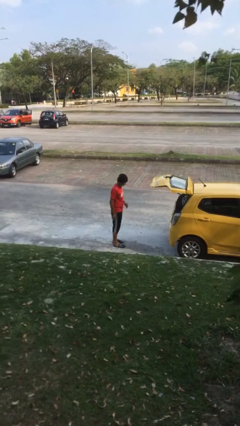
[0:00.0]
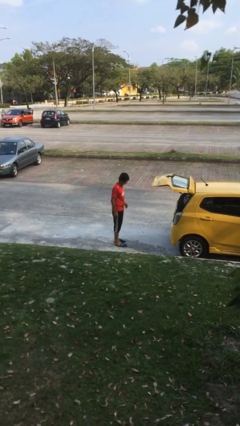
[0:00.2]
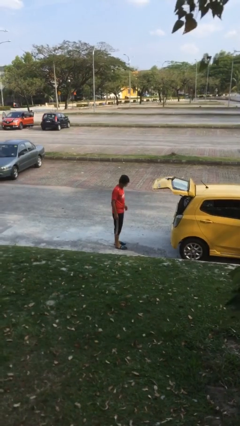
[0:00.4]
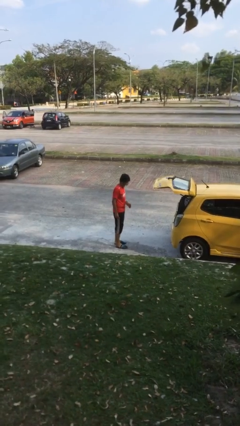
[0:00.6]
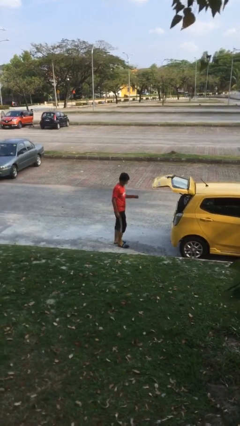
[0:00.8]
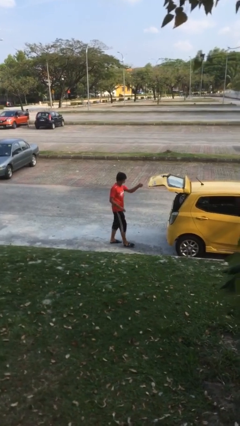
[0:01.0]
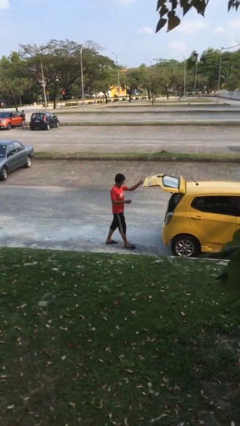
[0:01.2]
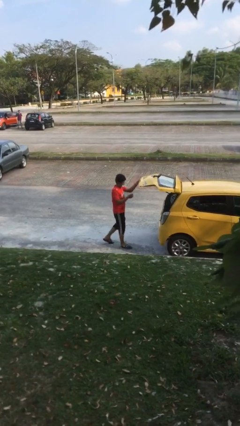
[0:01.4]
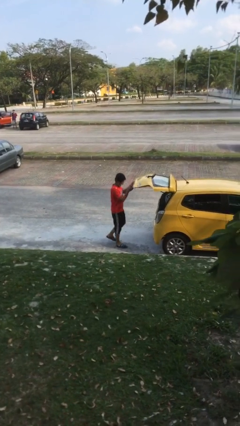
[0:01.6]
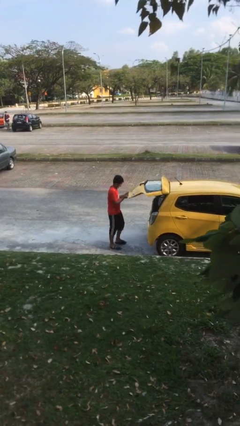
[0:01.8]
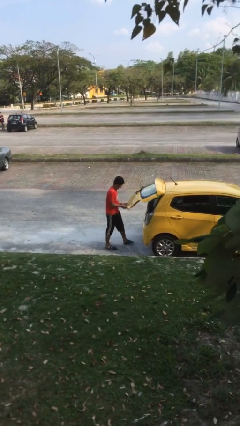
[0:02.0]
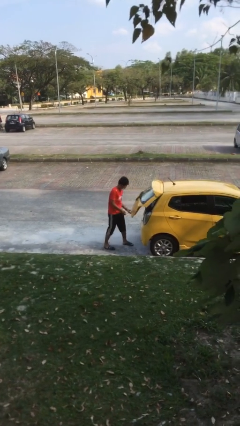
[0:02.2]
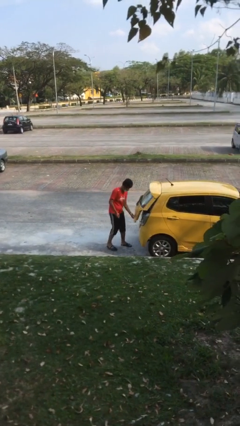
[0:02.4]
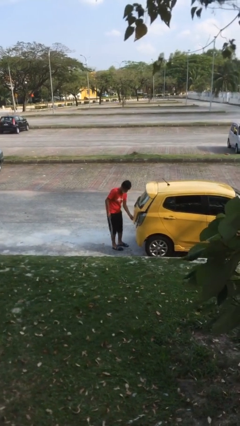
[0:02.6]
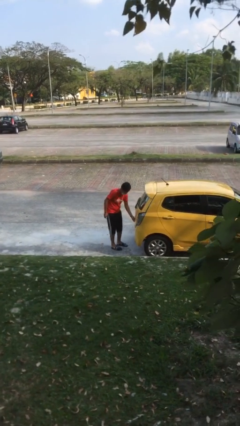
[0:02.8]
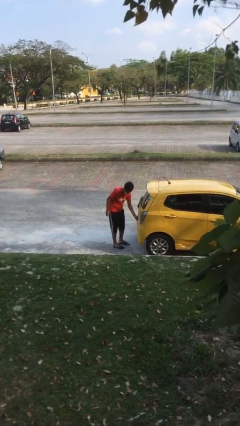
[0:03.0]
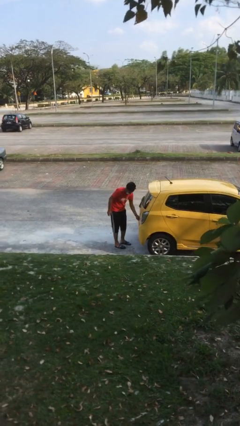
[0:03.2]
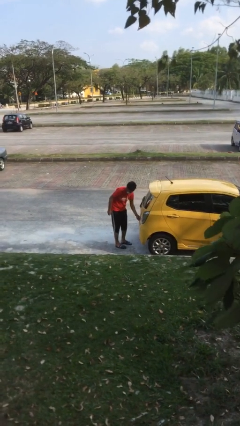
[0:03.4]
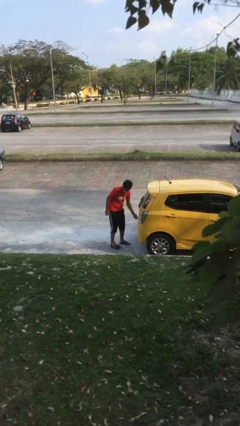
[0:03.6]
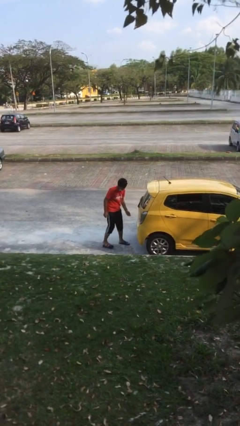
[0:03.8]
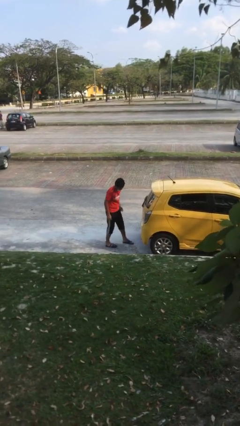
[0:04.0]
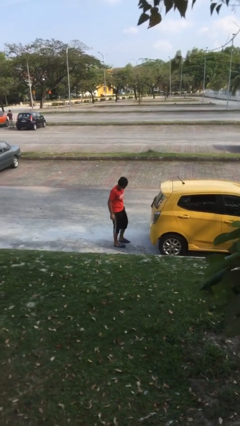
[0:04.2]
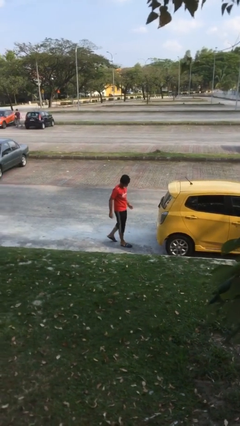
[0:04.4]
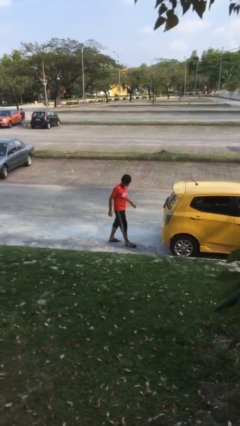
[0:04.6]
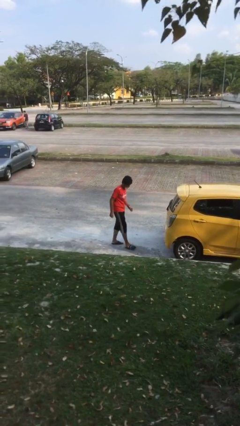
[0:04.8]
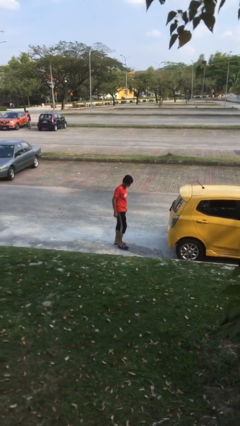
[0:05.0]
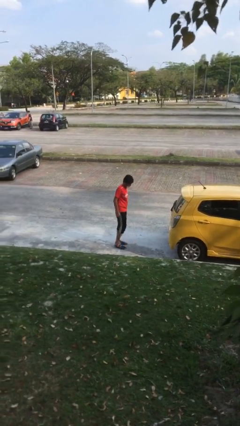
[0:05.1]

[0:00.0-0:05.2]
person closes car trunk

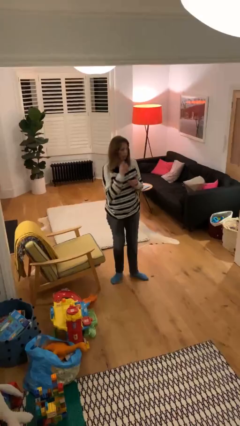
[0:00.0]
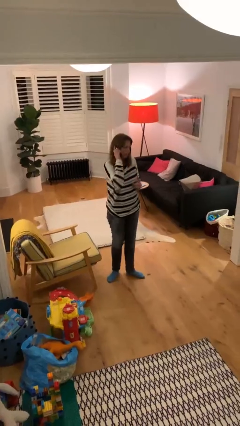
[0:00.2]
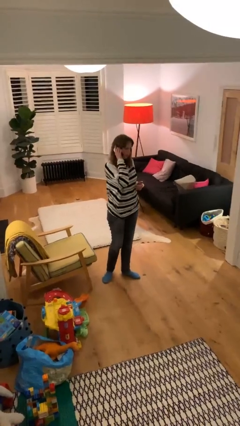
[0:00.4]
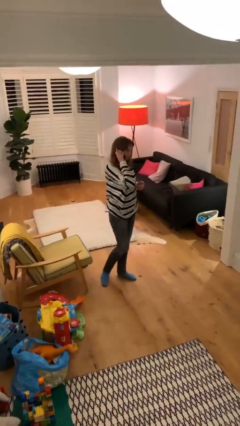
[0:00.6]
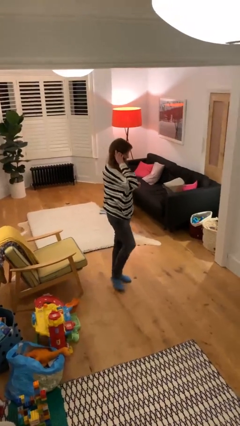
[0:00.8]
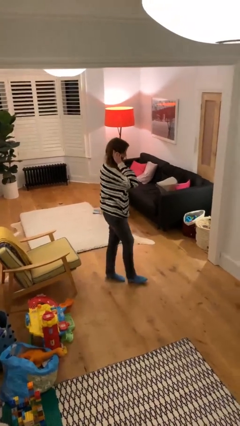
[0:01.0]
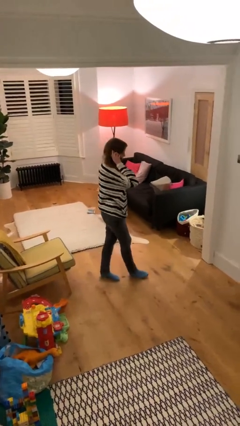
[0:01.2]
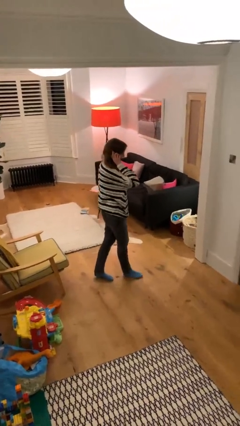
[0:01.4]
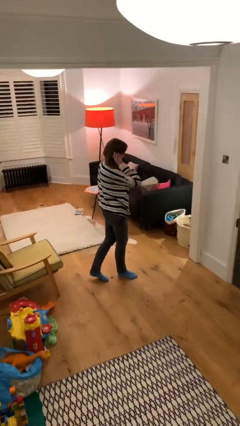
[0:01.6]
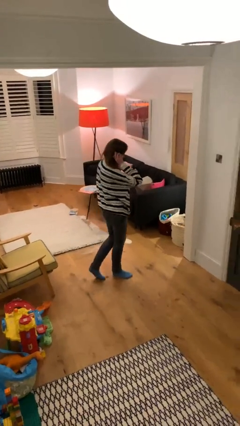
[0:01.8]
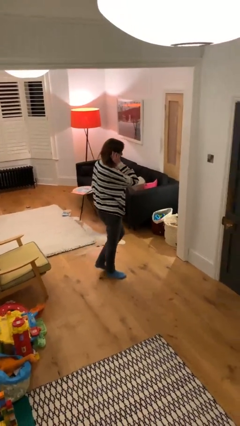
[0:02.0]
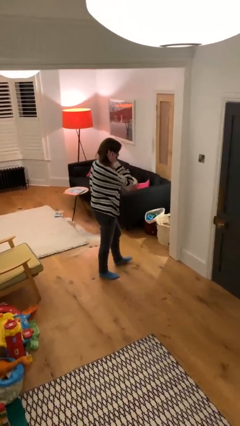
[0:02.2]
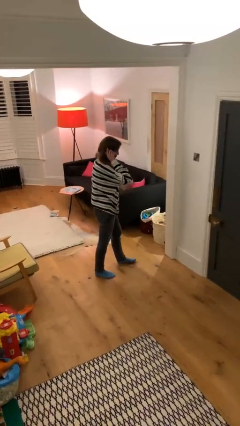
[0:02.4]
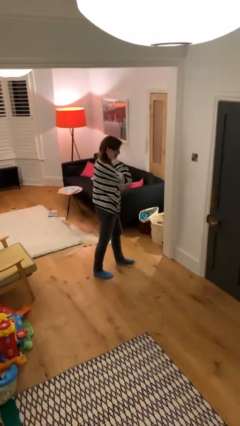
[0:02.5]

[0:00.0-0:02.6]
person talks on phone

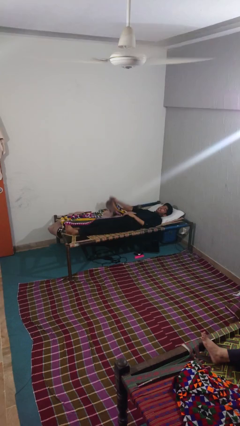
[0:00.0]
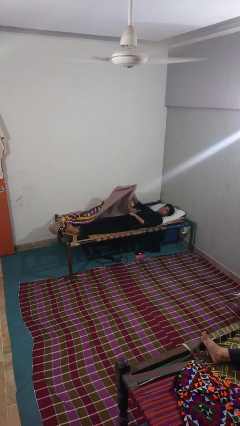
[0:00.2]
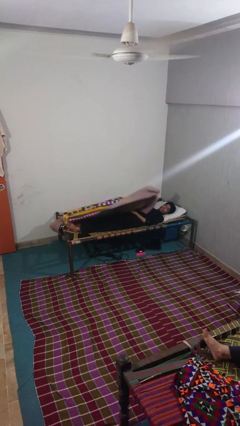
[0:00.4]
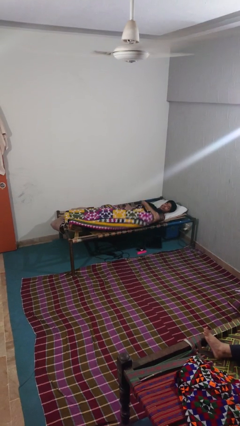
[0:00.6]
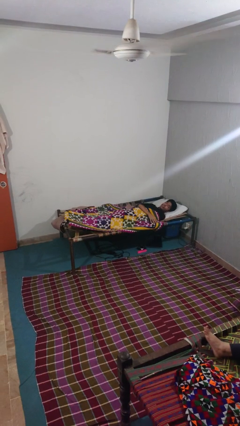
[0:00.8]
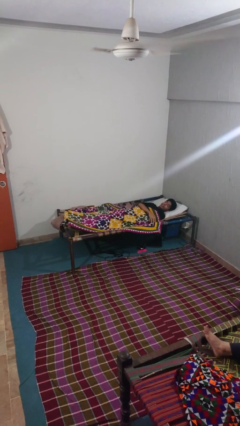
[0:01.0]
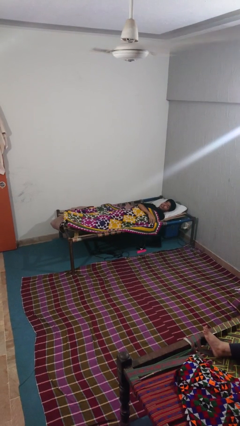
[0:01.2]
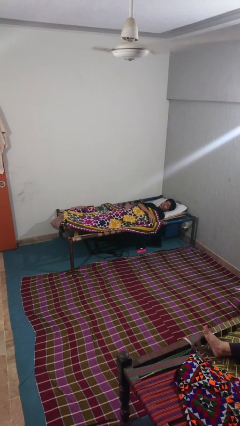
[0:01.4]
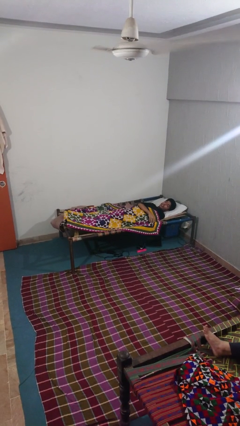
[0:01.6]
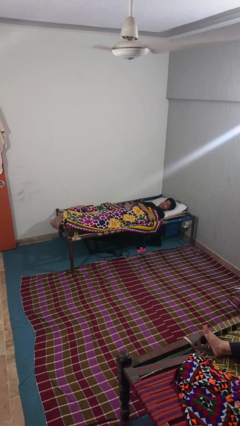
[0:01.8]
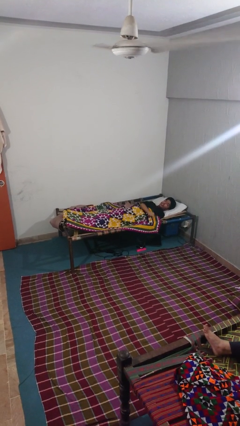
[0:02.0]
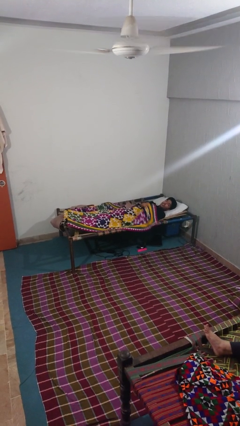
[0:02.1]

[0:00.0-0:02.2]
person covers with bedsheets

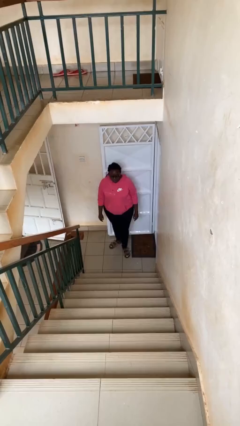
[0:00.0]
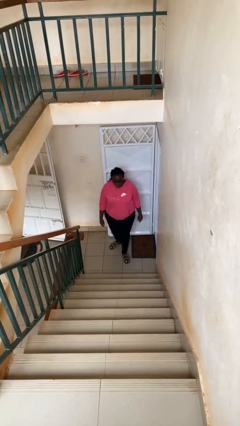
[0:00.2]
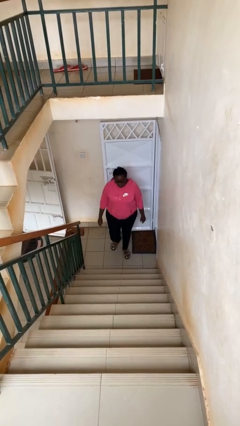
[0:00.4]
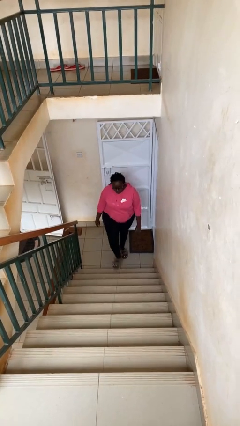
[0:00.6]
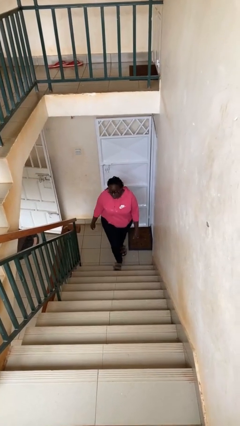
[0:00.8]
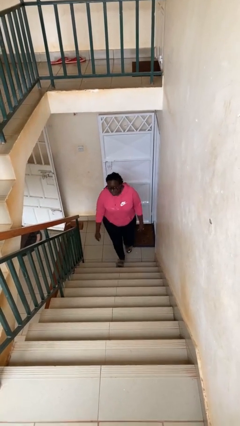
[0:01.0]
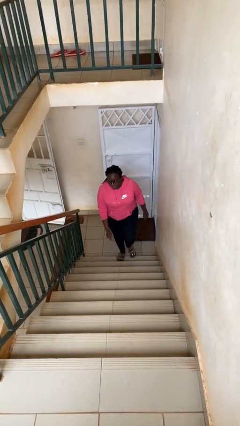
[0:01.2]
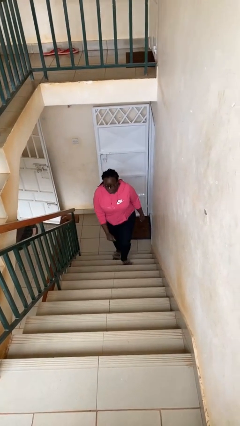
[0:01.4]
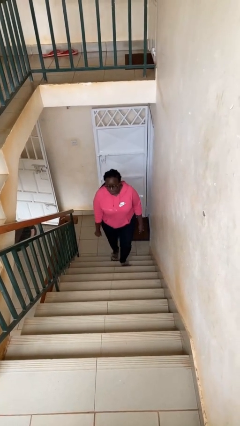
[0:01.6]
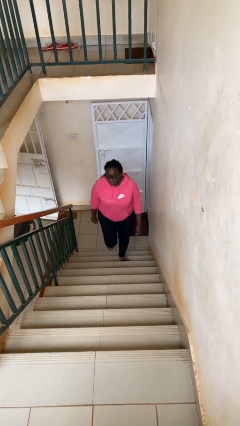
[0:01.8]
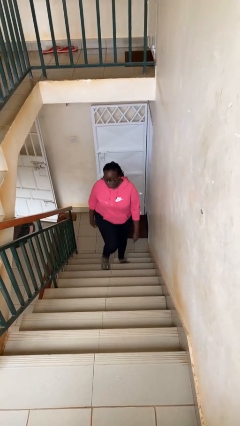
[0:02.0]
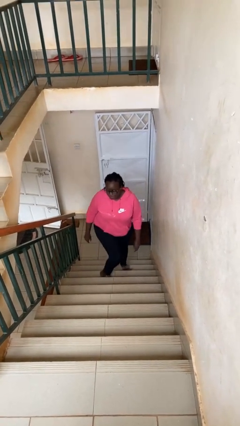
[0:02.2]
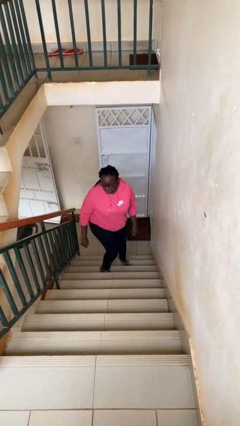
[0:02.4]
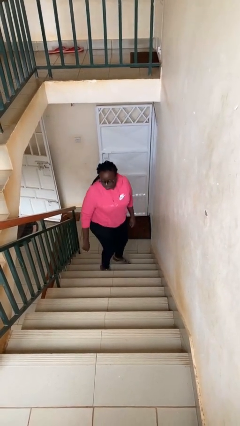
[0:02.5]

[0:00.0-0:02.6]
person climbs up stairs

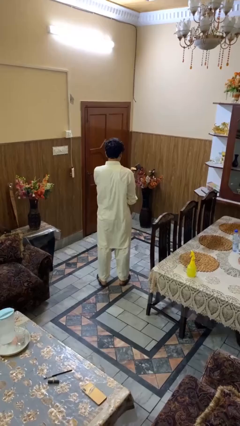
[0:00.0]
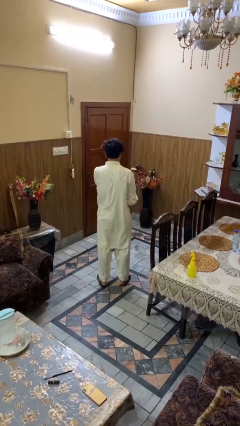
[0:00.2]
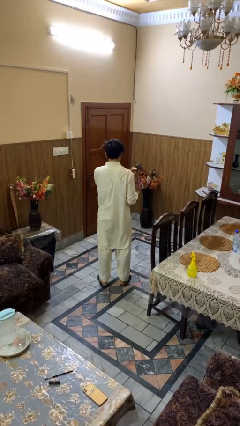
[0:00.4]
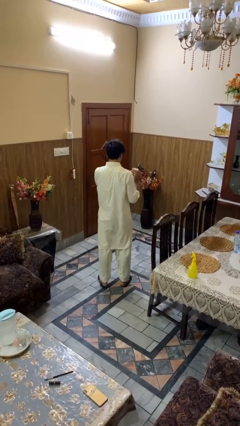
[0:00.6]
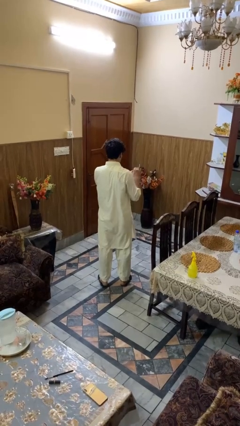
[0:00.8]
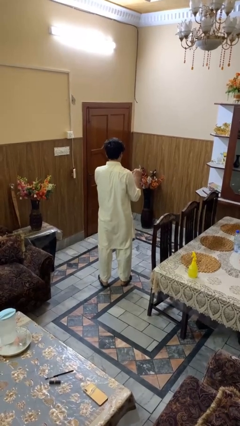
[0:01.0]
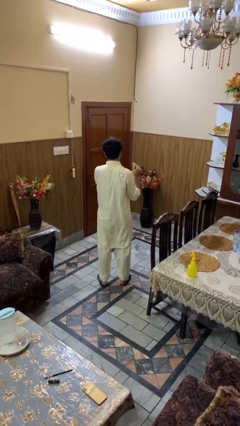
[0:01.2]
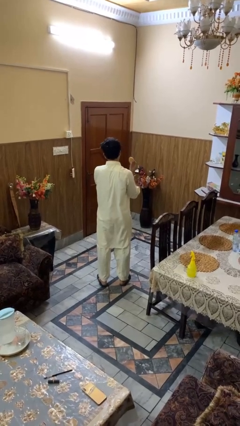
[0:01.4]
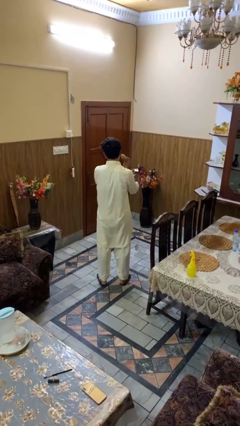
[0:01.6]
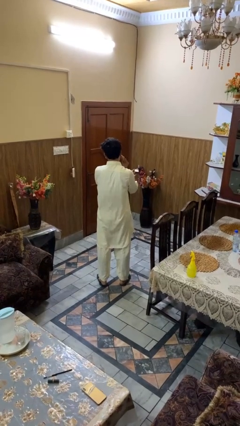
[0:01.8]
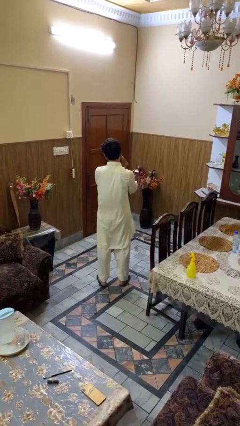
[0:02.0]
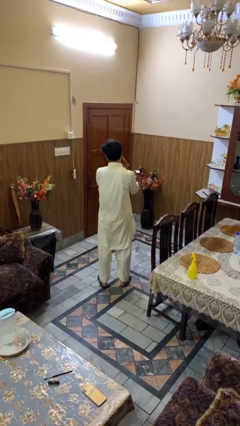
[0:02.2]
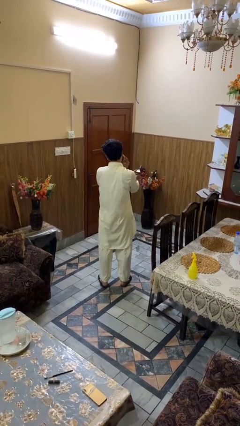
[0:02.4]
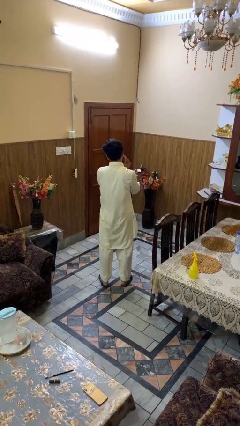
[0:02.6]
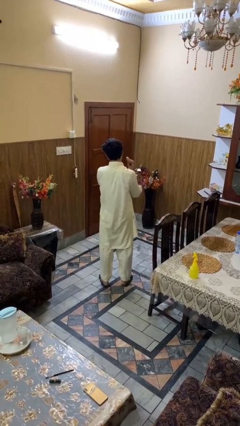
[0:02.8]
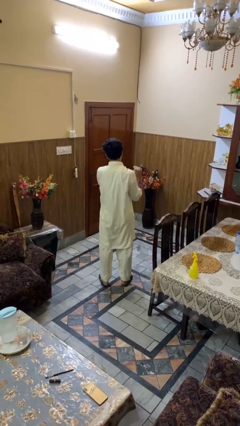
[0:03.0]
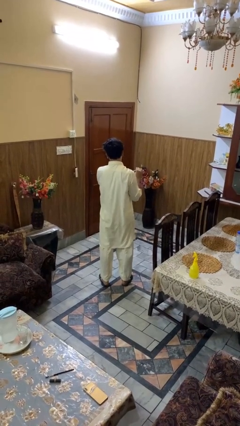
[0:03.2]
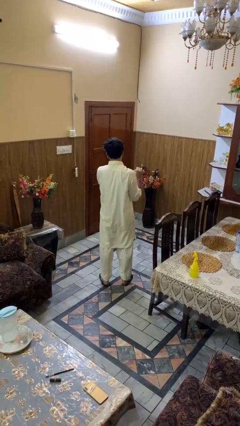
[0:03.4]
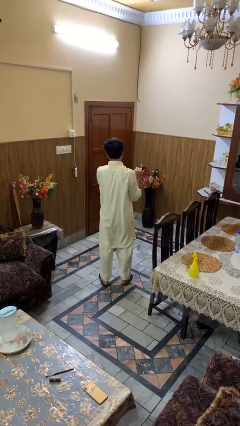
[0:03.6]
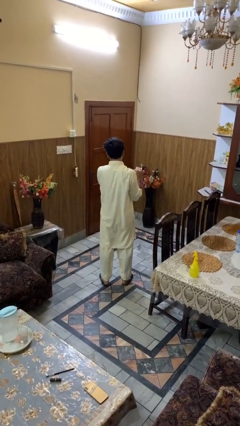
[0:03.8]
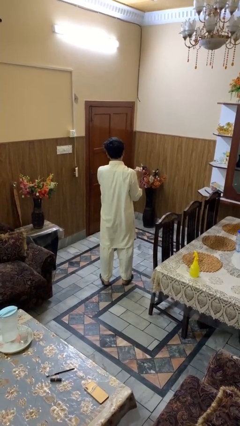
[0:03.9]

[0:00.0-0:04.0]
person applies foundation makeup

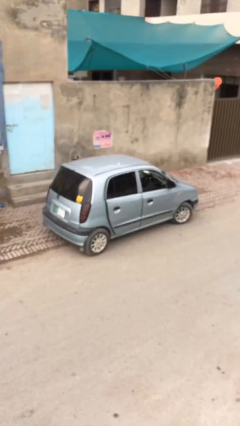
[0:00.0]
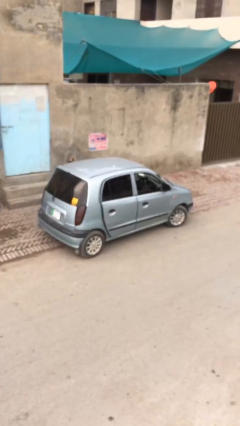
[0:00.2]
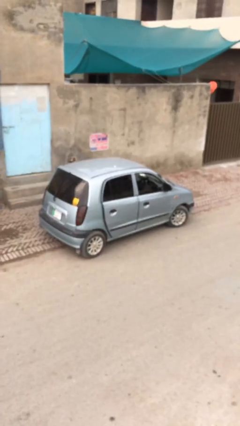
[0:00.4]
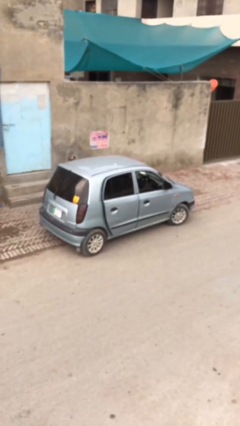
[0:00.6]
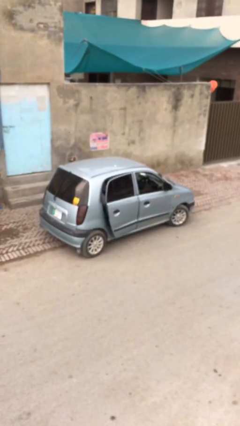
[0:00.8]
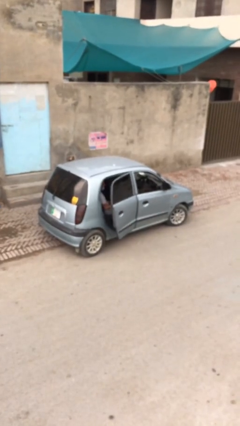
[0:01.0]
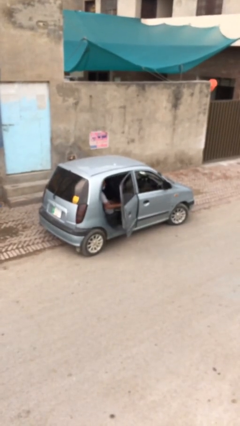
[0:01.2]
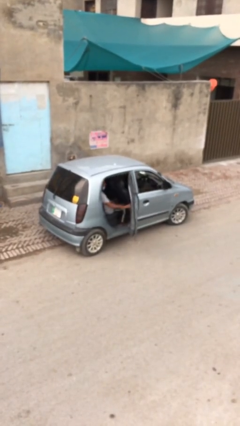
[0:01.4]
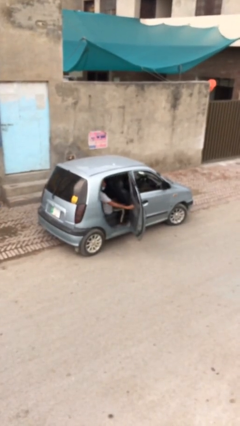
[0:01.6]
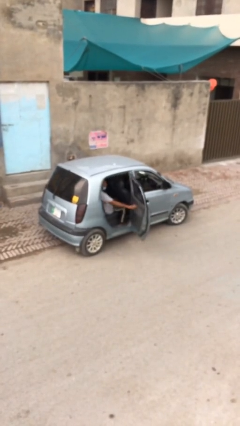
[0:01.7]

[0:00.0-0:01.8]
person opens car door
